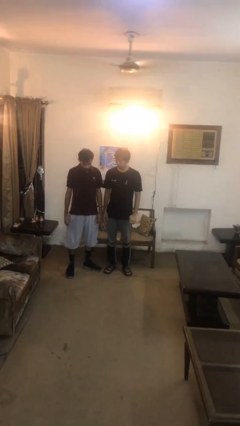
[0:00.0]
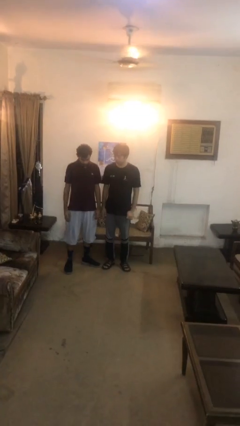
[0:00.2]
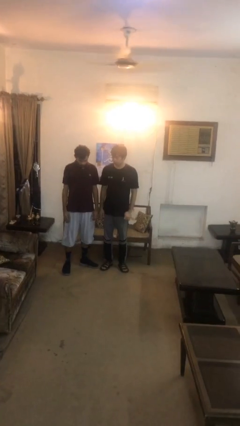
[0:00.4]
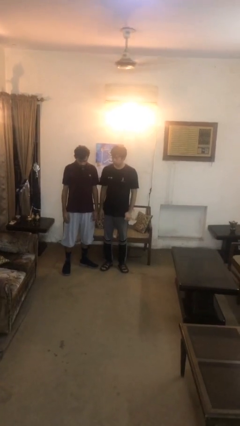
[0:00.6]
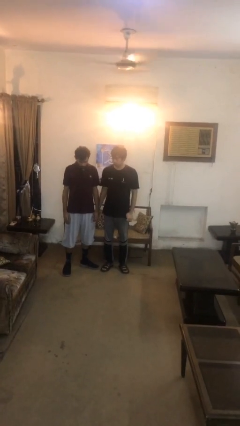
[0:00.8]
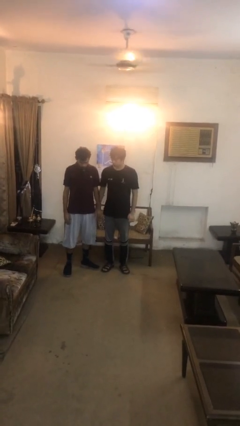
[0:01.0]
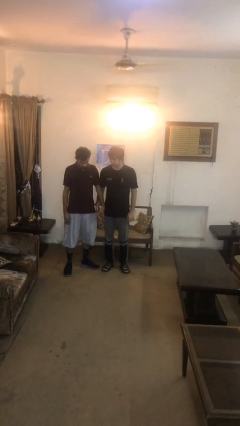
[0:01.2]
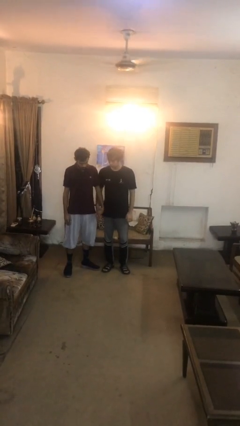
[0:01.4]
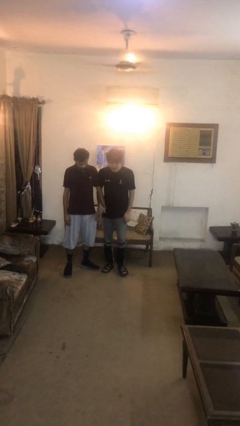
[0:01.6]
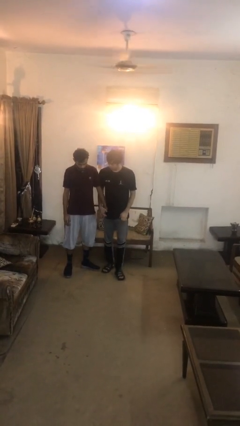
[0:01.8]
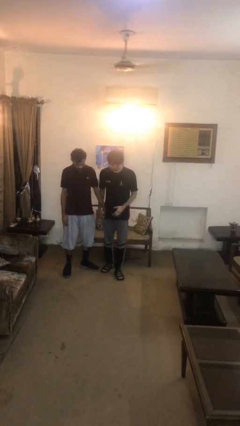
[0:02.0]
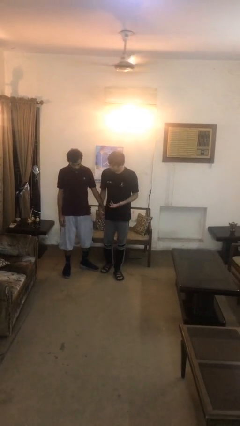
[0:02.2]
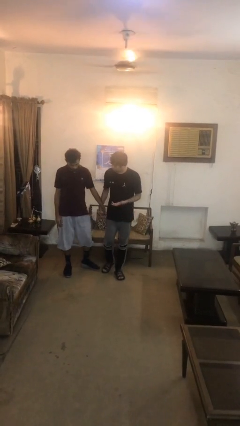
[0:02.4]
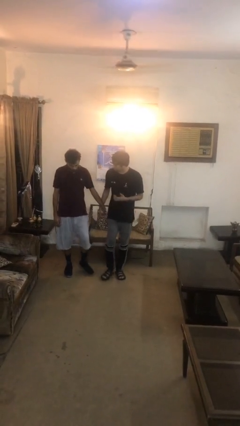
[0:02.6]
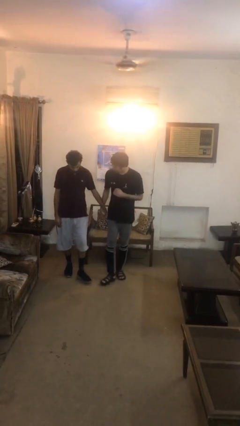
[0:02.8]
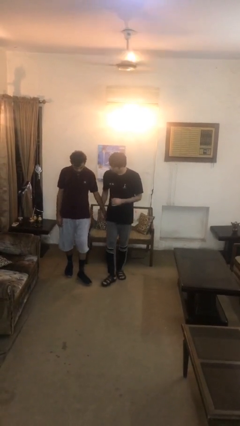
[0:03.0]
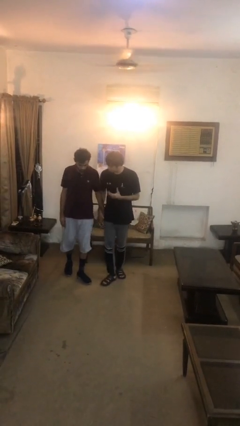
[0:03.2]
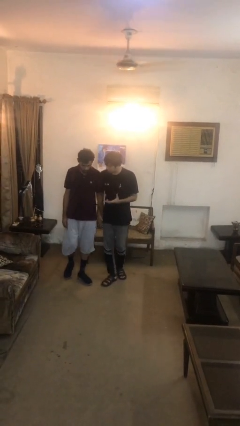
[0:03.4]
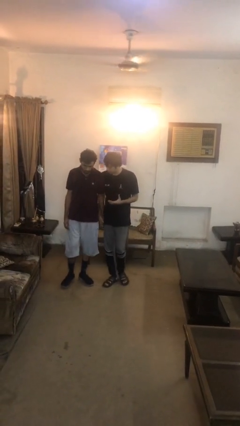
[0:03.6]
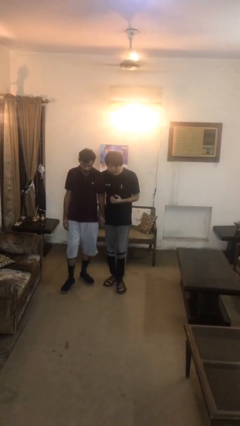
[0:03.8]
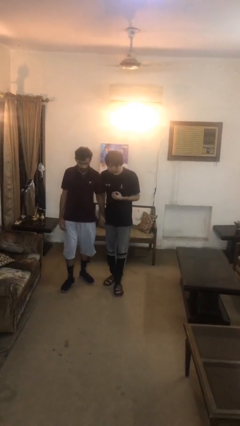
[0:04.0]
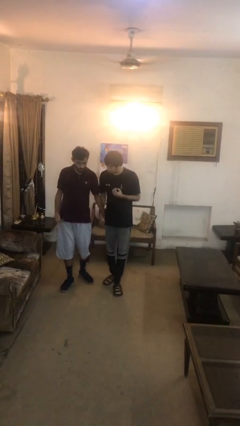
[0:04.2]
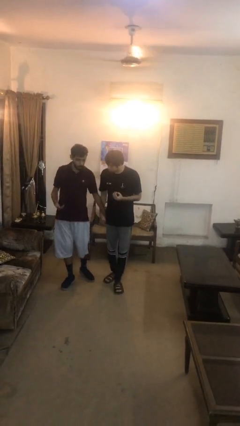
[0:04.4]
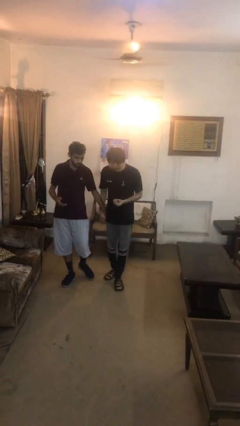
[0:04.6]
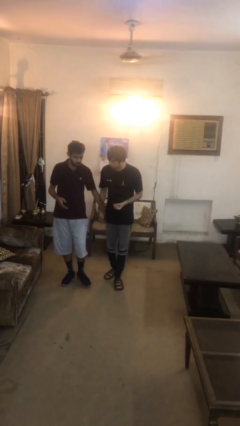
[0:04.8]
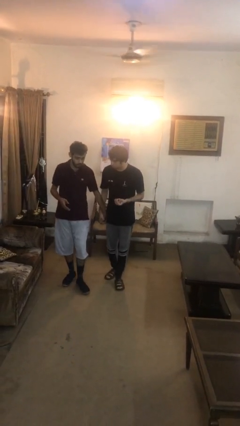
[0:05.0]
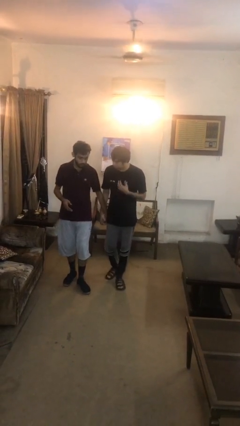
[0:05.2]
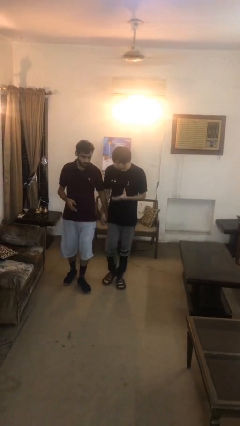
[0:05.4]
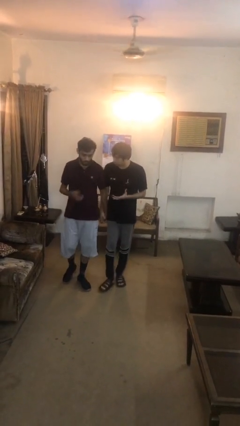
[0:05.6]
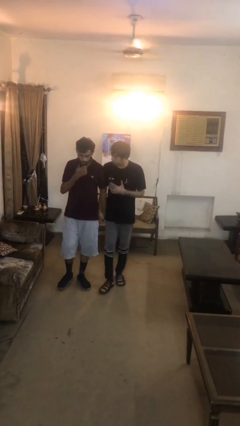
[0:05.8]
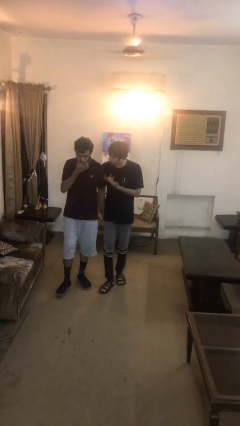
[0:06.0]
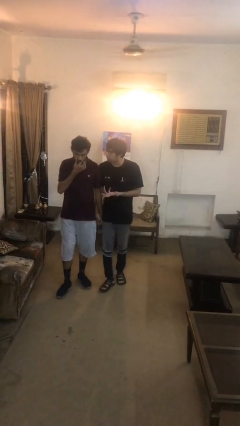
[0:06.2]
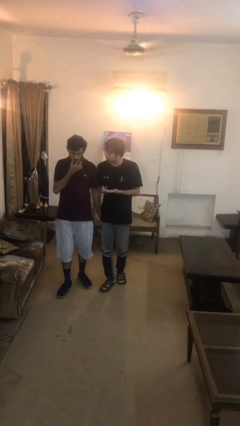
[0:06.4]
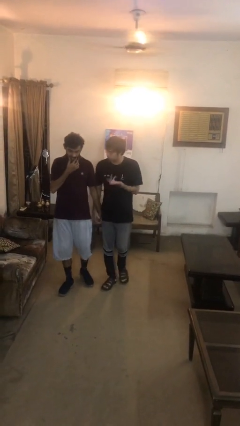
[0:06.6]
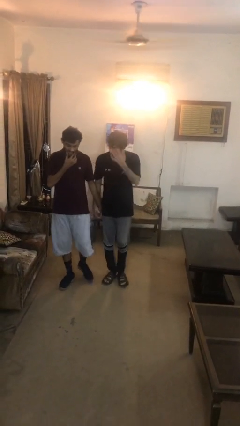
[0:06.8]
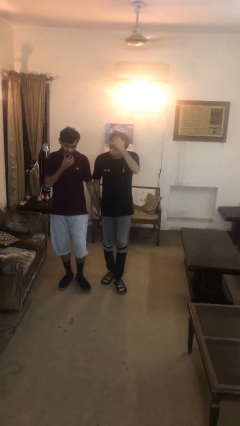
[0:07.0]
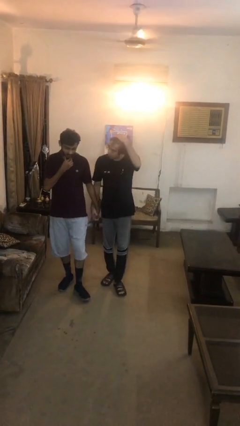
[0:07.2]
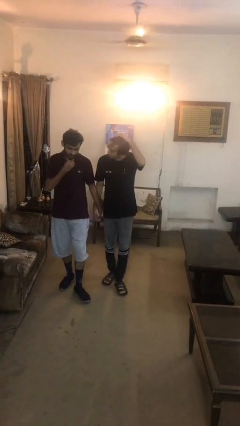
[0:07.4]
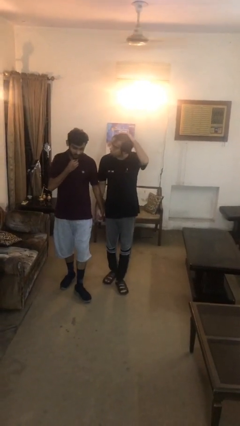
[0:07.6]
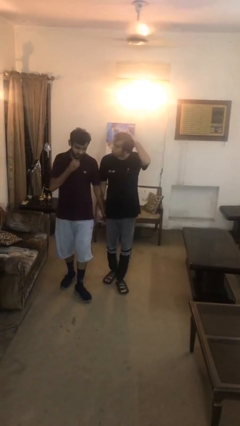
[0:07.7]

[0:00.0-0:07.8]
person holds hand

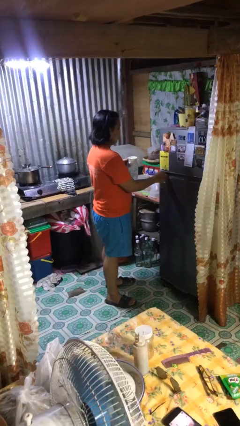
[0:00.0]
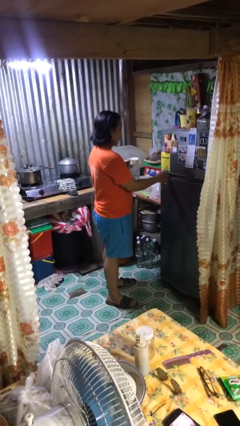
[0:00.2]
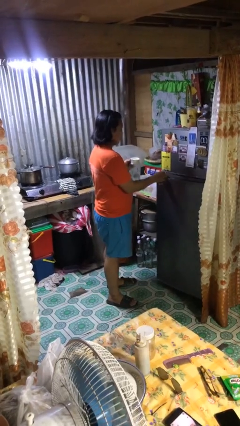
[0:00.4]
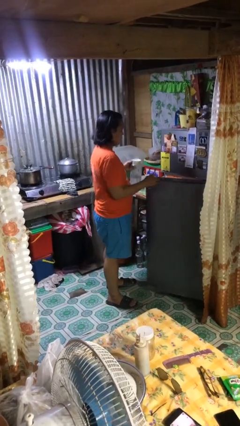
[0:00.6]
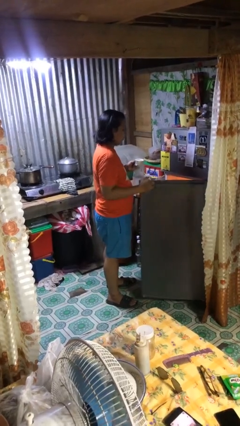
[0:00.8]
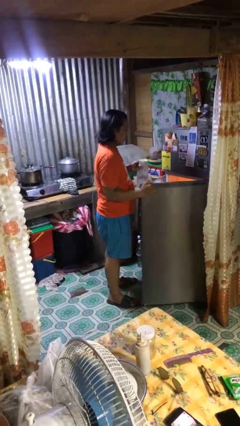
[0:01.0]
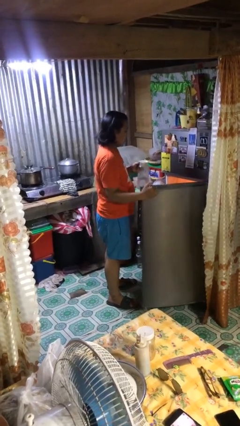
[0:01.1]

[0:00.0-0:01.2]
person opens refrigerator

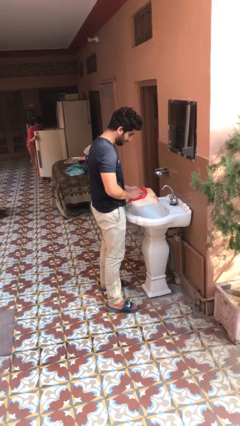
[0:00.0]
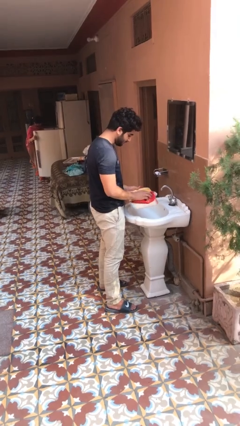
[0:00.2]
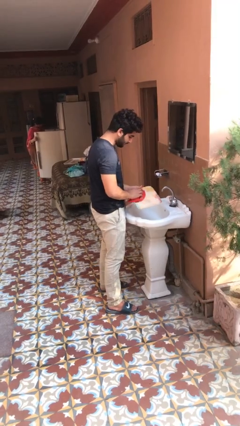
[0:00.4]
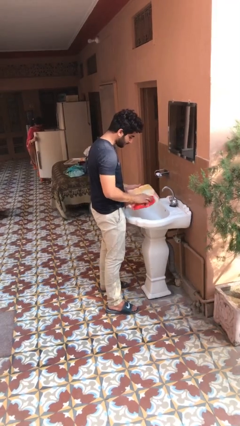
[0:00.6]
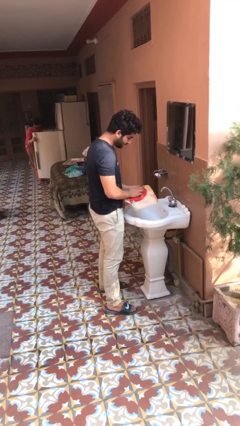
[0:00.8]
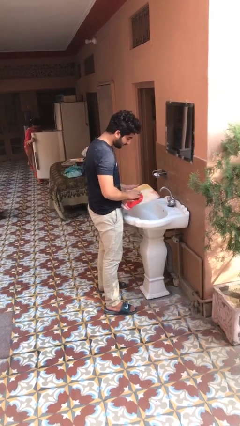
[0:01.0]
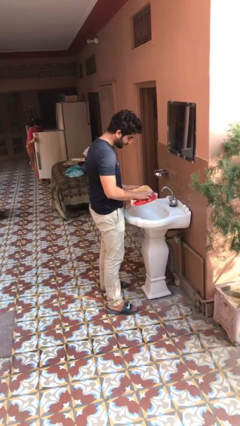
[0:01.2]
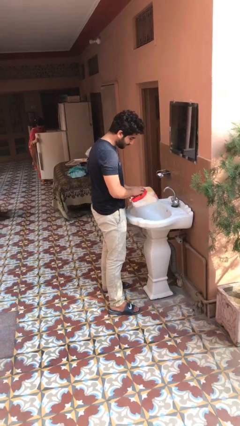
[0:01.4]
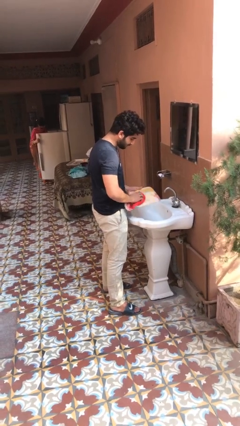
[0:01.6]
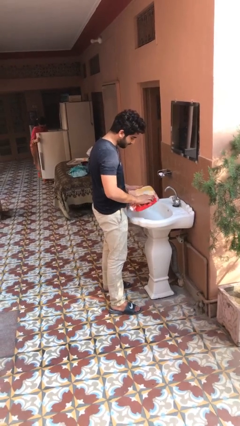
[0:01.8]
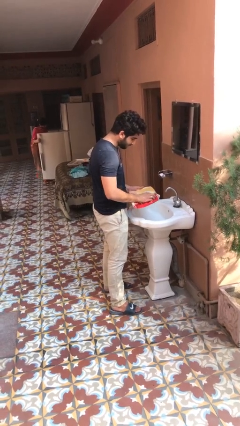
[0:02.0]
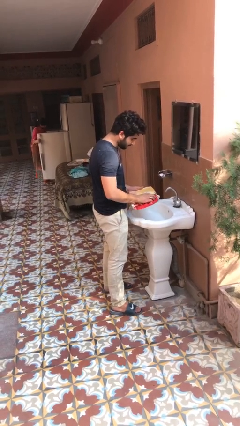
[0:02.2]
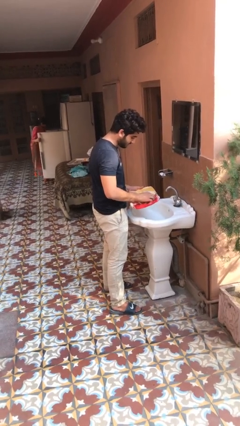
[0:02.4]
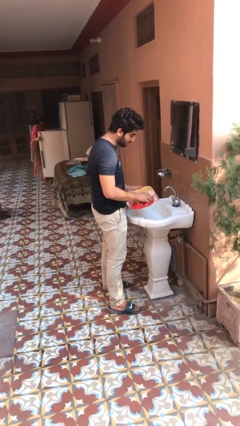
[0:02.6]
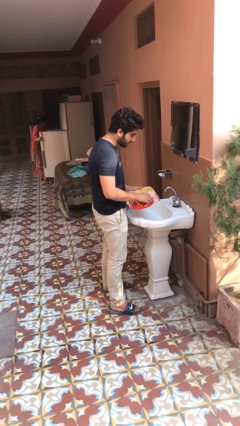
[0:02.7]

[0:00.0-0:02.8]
person dries dish

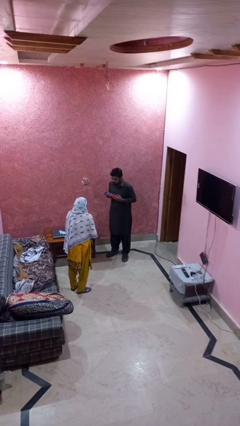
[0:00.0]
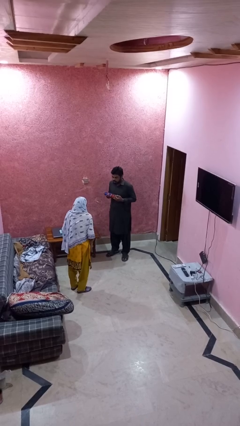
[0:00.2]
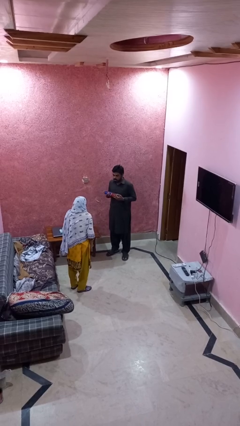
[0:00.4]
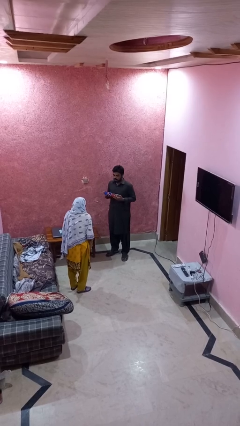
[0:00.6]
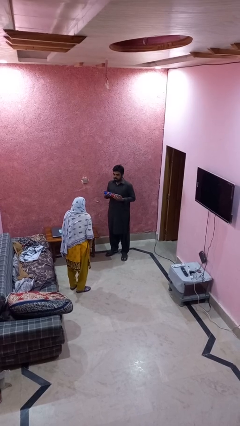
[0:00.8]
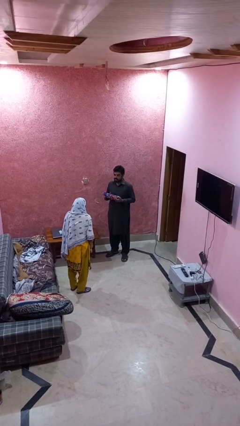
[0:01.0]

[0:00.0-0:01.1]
person catches object from person

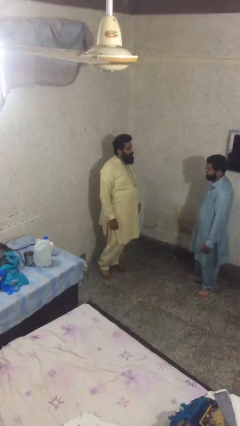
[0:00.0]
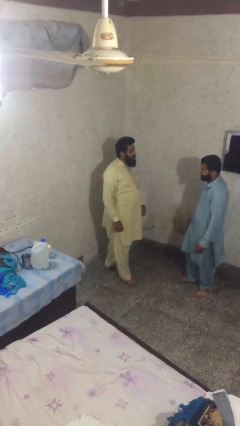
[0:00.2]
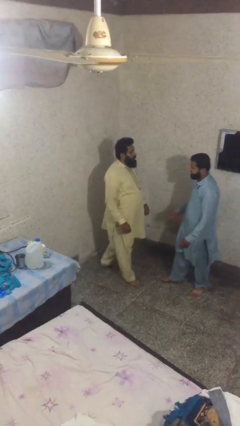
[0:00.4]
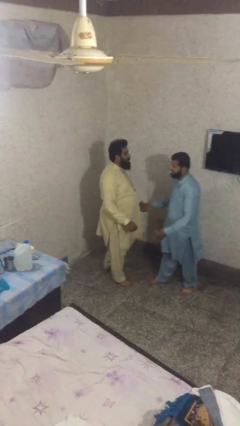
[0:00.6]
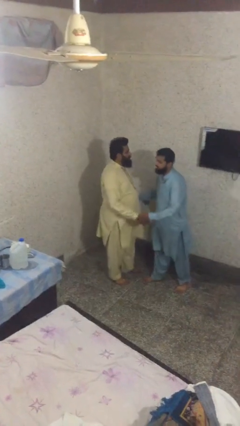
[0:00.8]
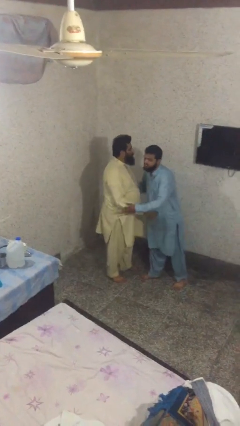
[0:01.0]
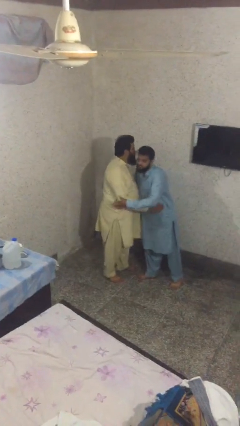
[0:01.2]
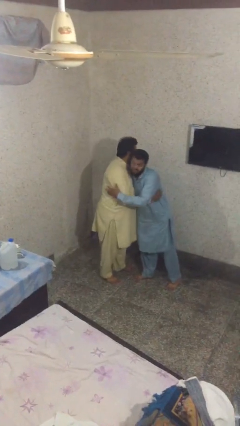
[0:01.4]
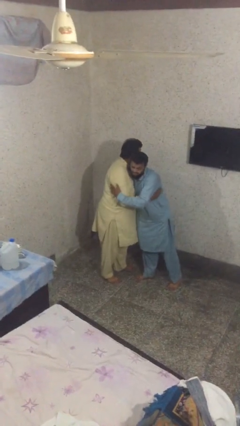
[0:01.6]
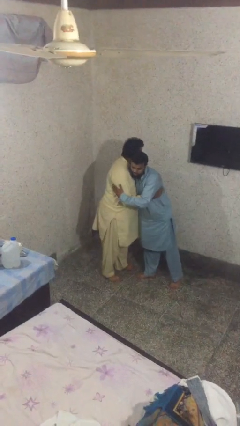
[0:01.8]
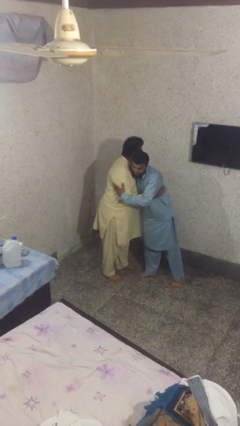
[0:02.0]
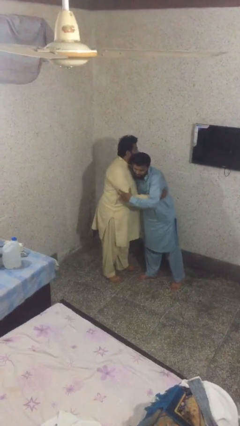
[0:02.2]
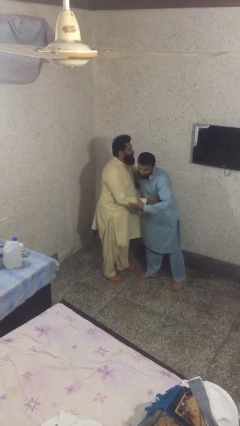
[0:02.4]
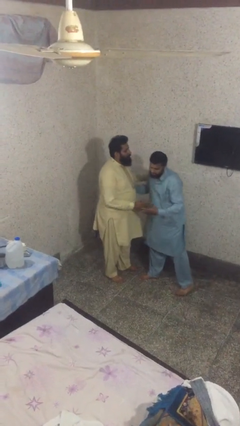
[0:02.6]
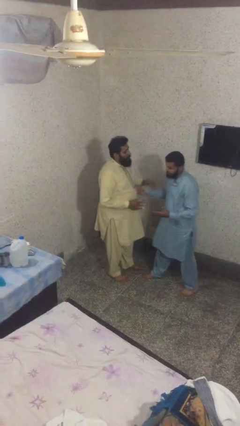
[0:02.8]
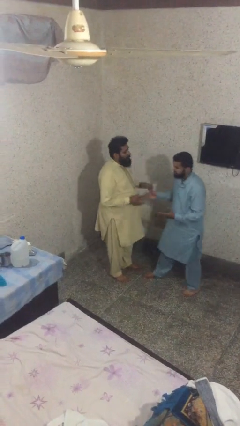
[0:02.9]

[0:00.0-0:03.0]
person embraces person

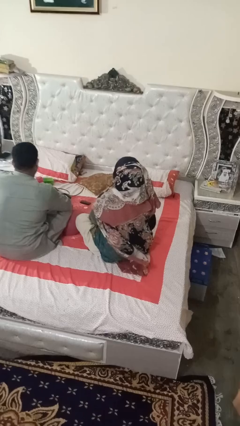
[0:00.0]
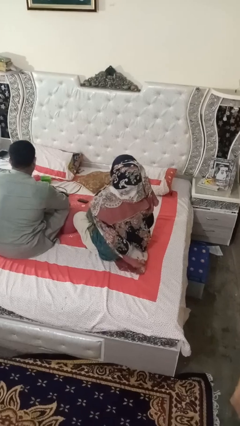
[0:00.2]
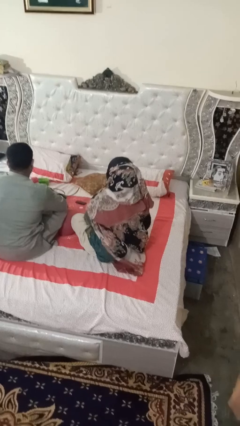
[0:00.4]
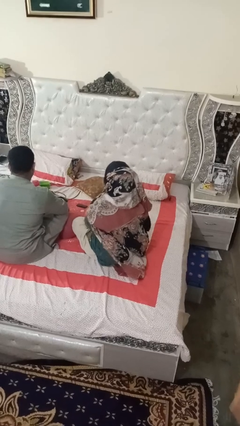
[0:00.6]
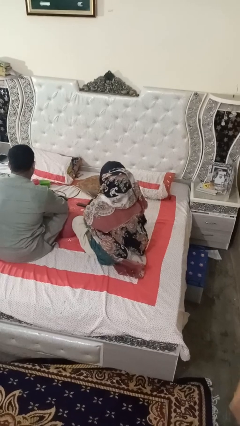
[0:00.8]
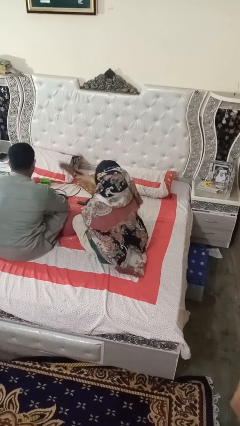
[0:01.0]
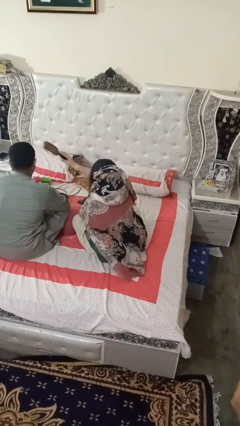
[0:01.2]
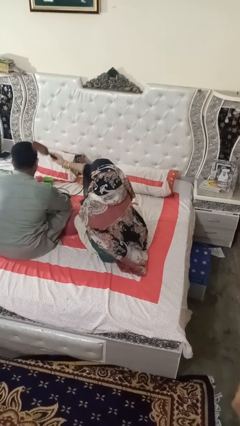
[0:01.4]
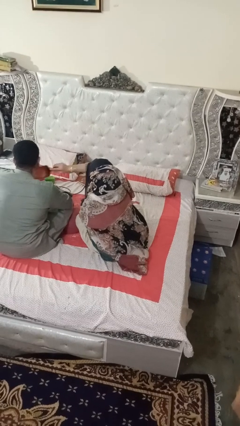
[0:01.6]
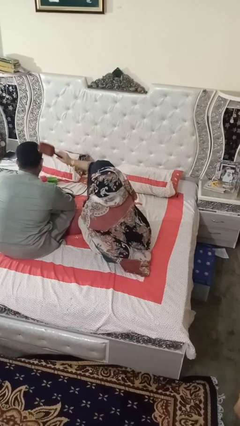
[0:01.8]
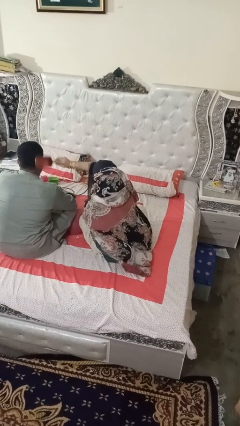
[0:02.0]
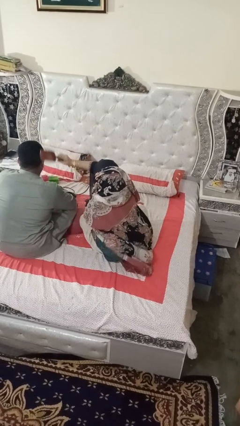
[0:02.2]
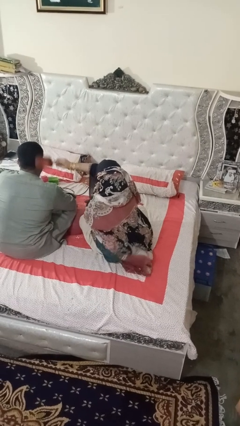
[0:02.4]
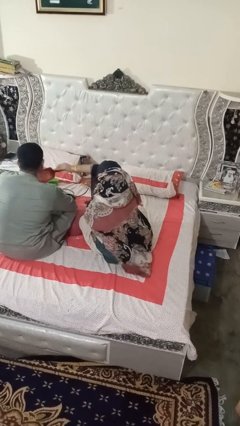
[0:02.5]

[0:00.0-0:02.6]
person brushes hair of person
